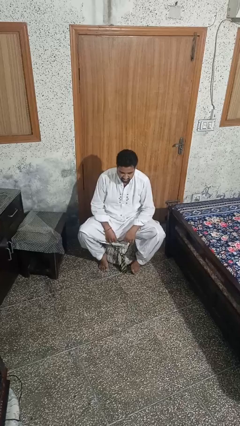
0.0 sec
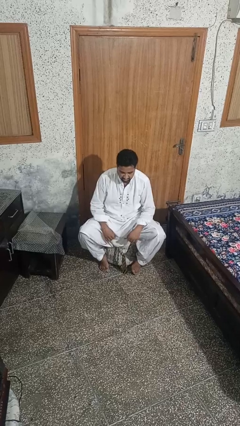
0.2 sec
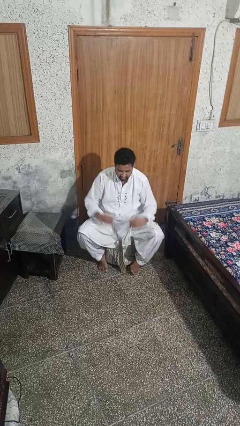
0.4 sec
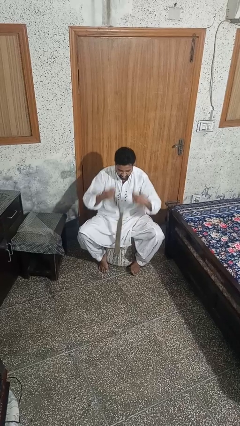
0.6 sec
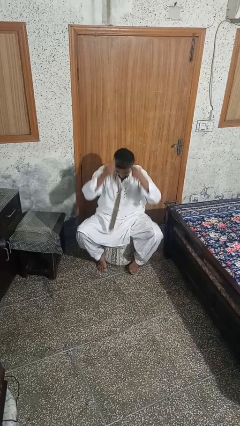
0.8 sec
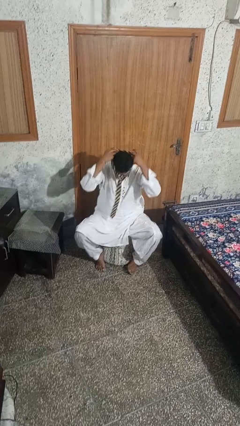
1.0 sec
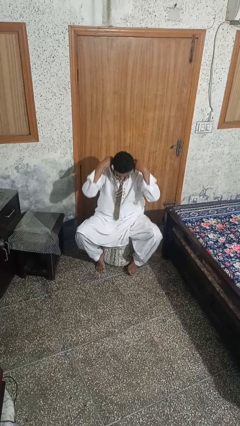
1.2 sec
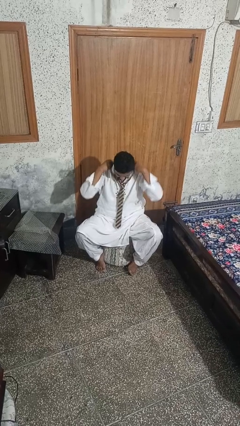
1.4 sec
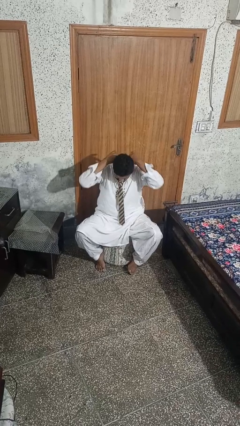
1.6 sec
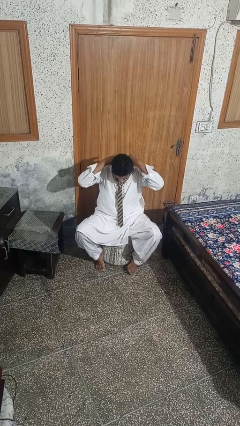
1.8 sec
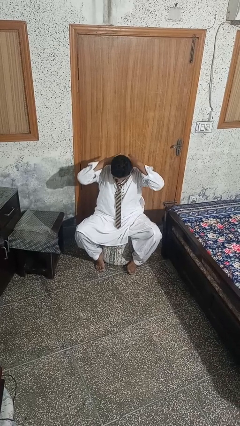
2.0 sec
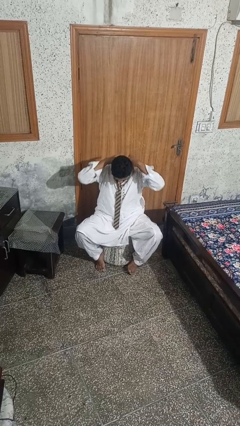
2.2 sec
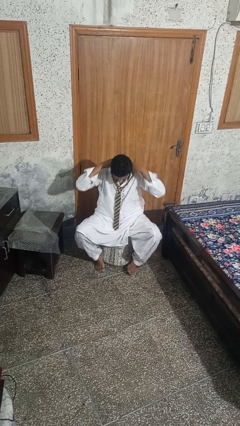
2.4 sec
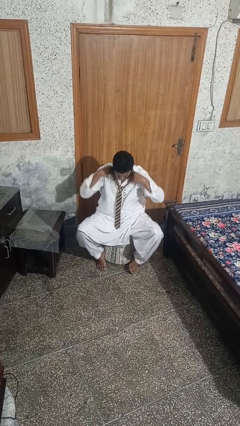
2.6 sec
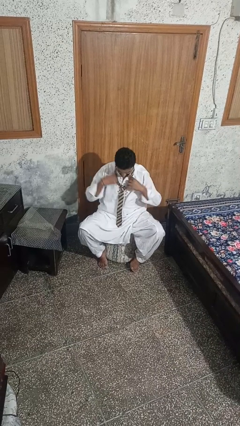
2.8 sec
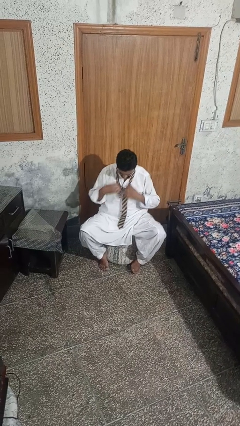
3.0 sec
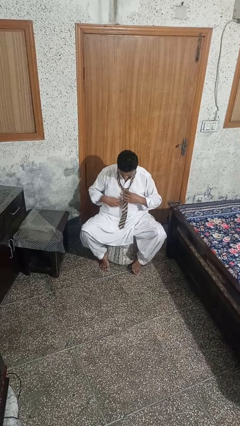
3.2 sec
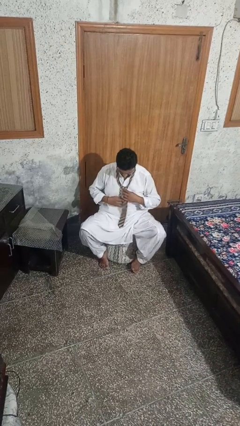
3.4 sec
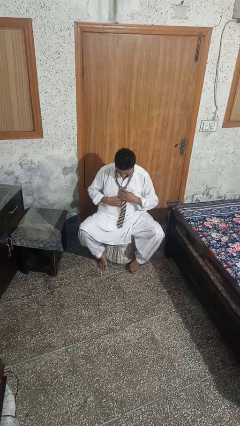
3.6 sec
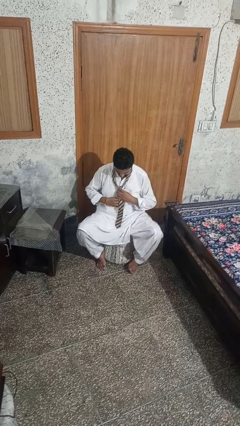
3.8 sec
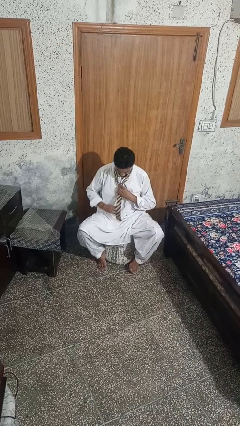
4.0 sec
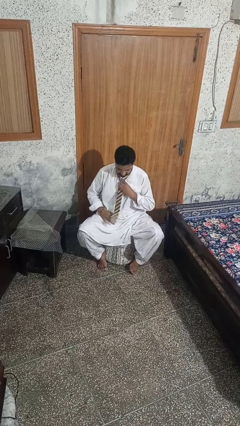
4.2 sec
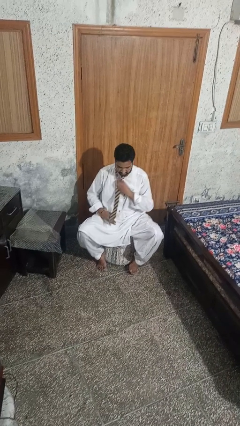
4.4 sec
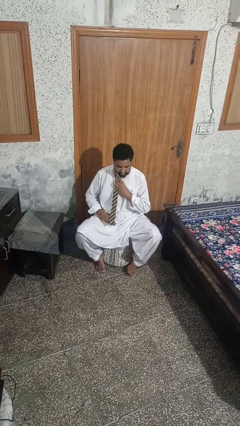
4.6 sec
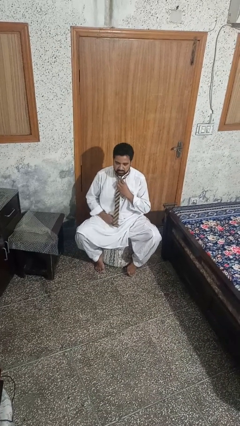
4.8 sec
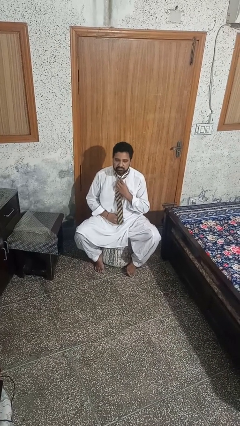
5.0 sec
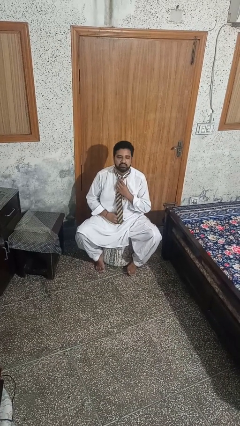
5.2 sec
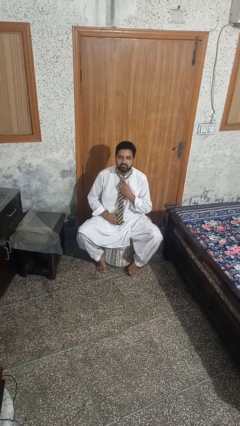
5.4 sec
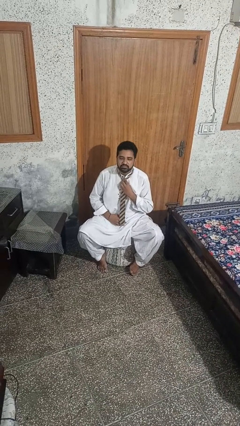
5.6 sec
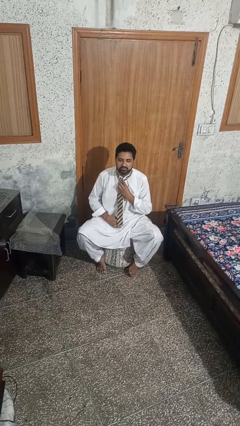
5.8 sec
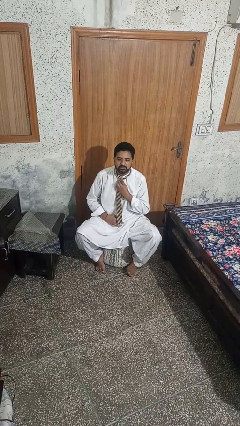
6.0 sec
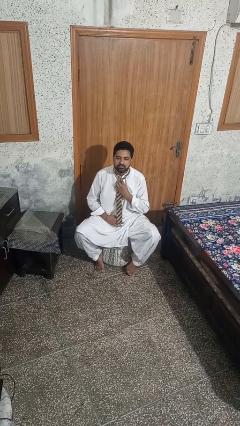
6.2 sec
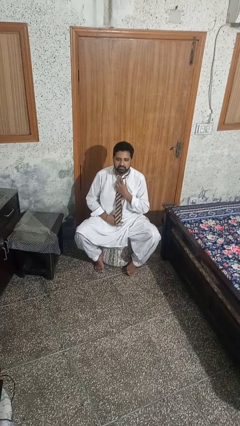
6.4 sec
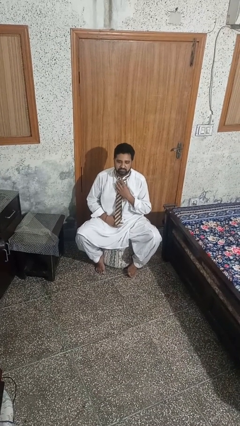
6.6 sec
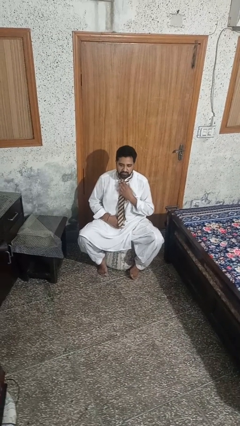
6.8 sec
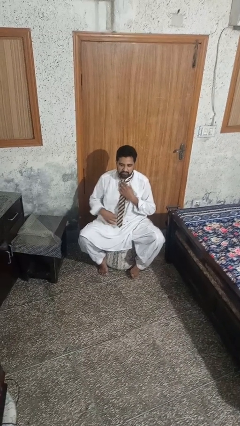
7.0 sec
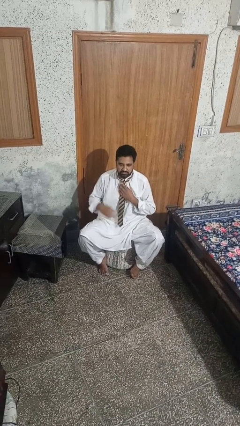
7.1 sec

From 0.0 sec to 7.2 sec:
person puts on necktie

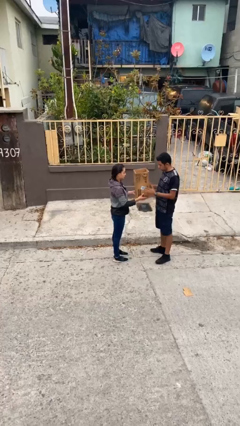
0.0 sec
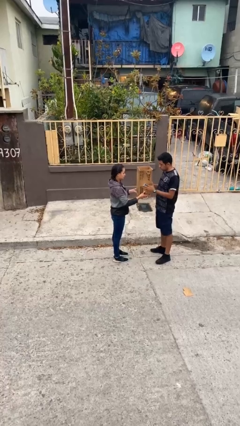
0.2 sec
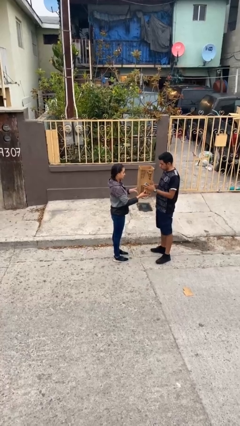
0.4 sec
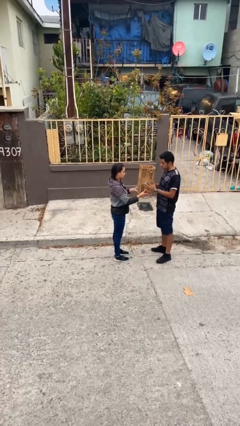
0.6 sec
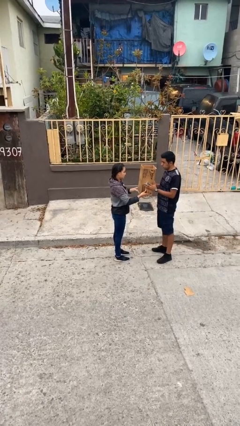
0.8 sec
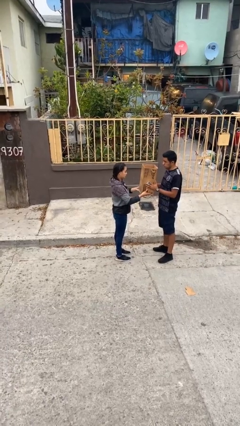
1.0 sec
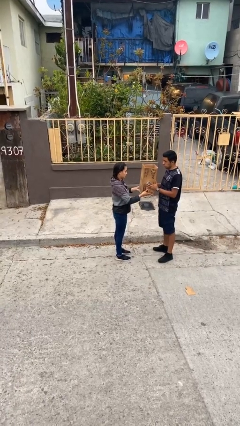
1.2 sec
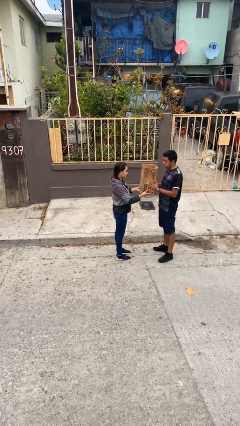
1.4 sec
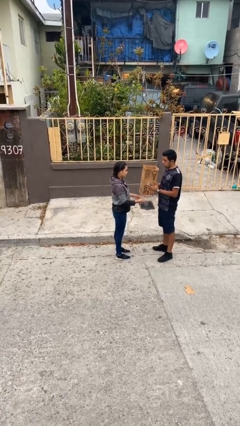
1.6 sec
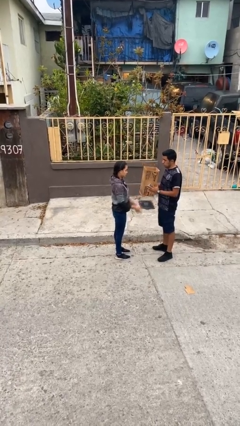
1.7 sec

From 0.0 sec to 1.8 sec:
person transfers object to person

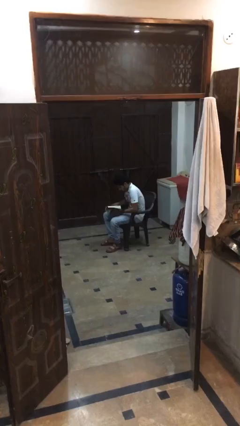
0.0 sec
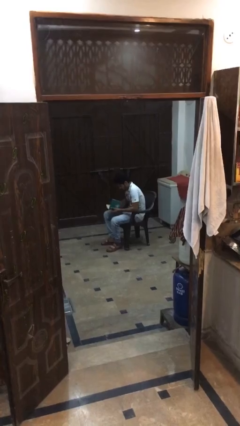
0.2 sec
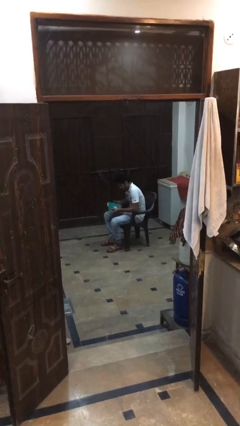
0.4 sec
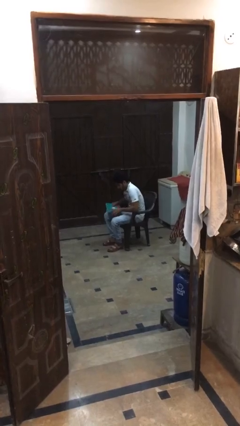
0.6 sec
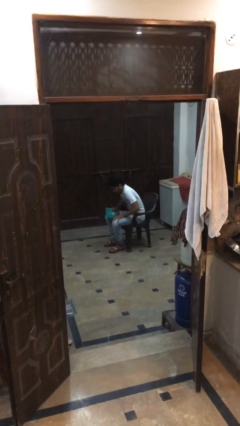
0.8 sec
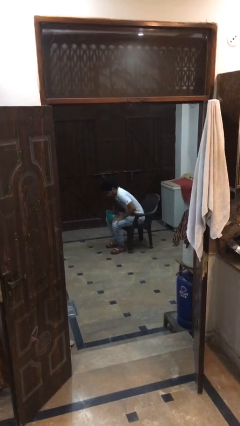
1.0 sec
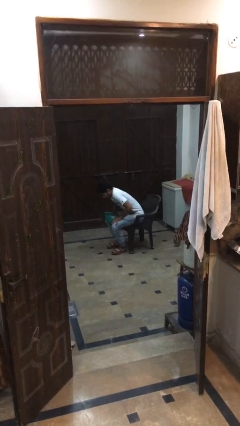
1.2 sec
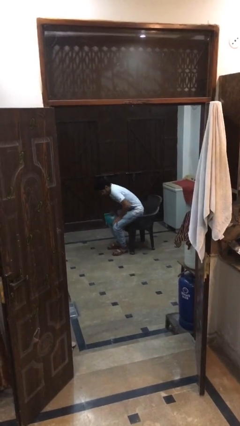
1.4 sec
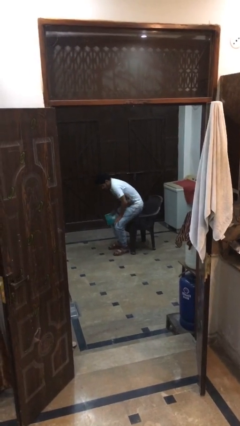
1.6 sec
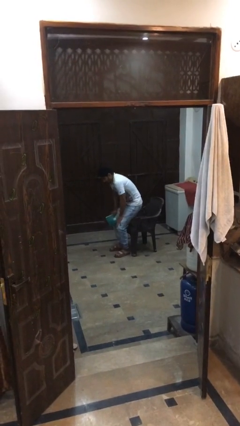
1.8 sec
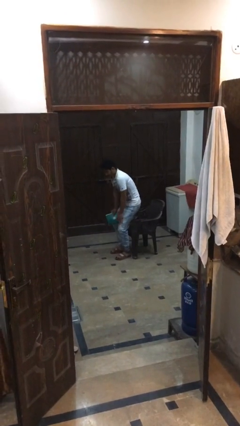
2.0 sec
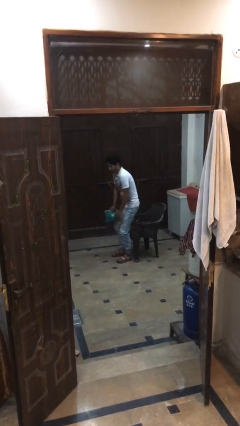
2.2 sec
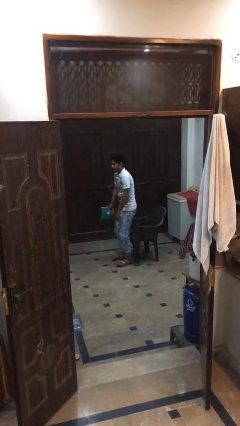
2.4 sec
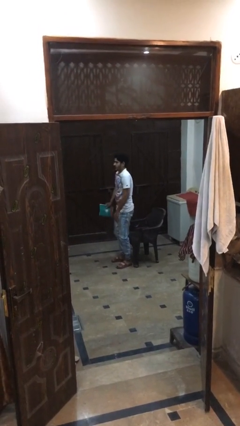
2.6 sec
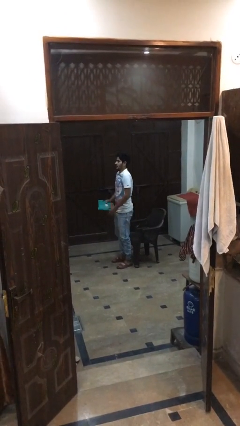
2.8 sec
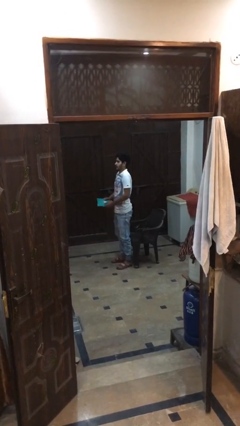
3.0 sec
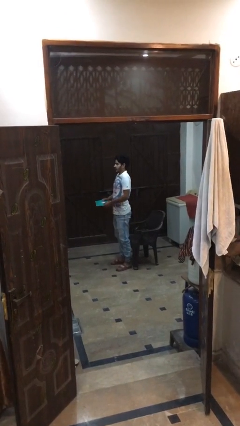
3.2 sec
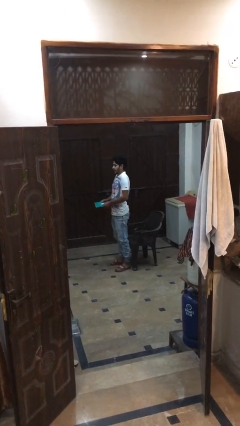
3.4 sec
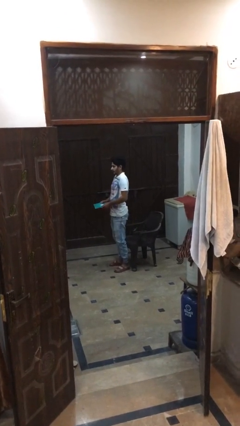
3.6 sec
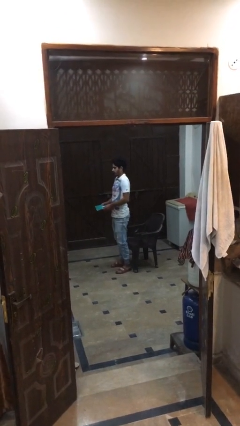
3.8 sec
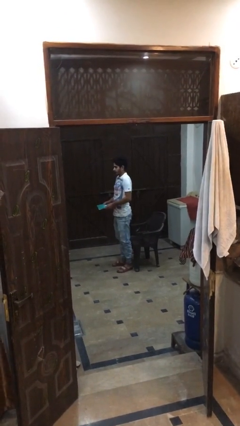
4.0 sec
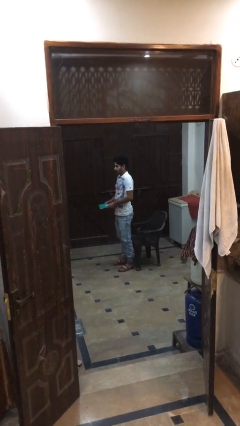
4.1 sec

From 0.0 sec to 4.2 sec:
person stands up

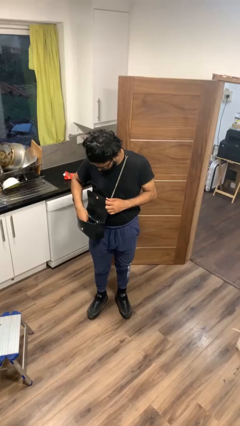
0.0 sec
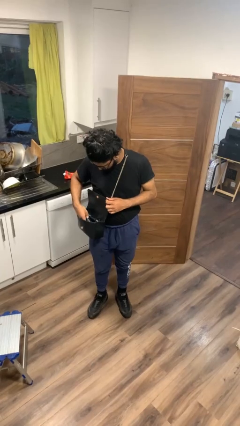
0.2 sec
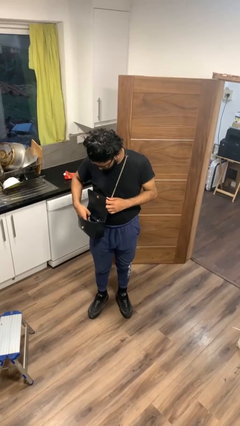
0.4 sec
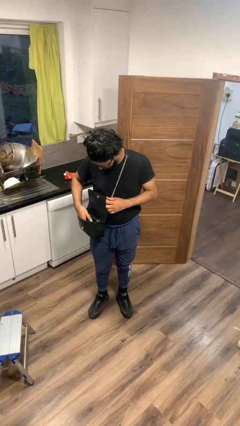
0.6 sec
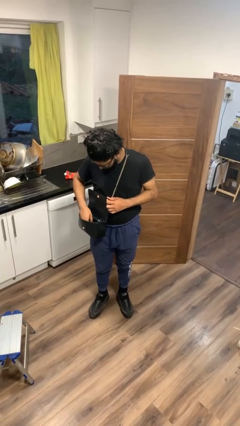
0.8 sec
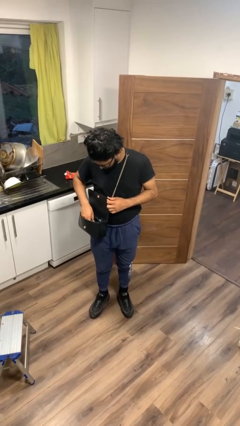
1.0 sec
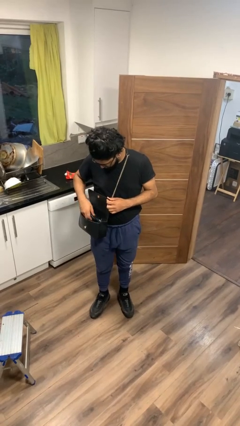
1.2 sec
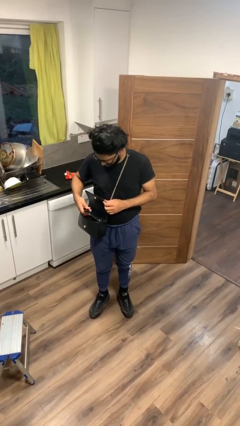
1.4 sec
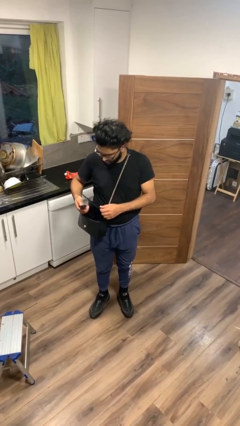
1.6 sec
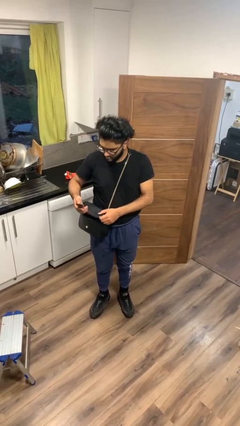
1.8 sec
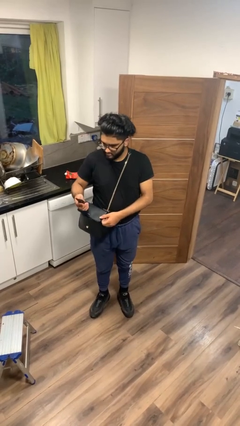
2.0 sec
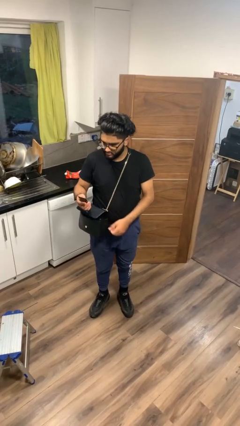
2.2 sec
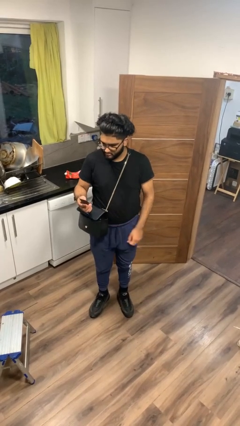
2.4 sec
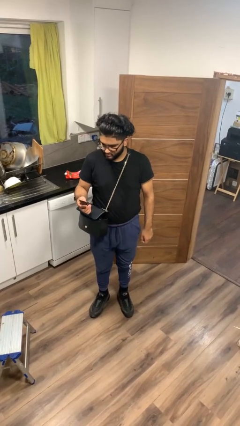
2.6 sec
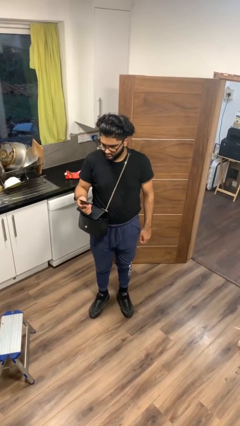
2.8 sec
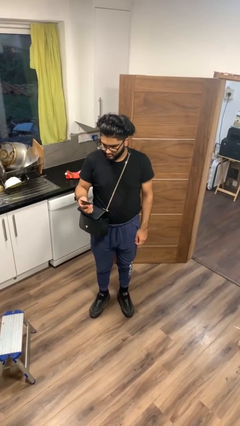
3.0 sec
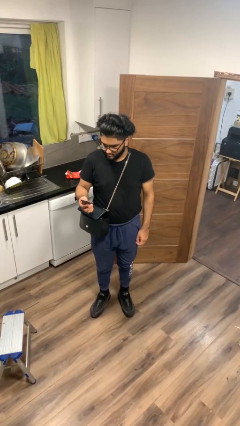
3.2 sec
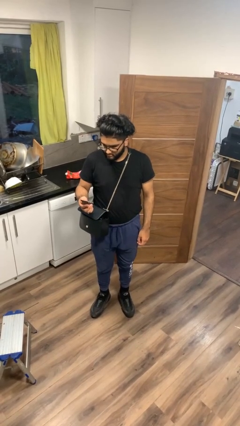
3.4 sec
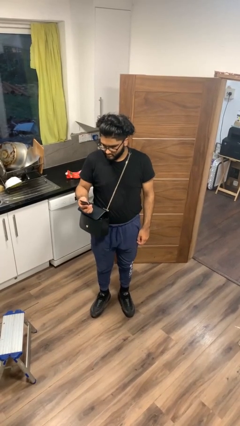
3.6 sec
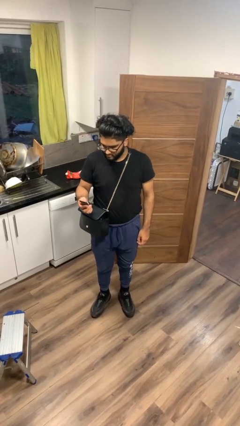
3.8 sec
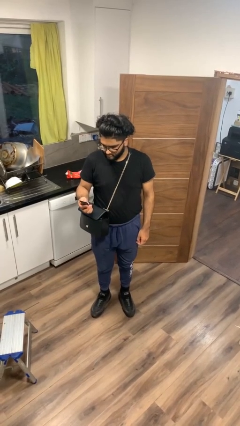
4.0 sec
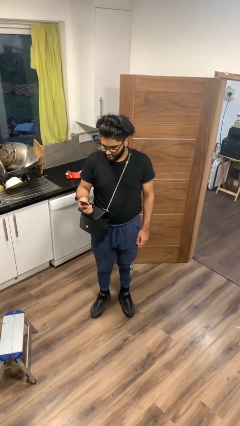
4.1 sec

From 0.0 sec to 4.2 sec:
person takes object from purse

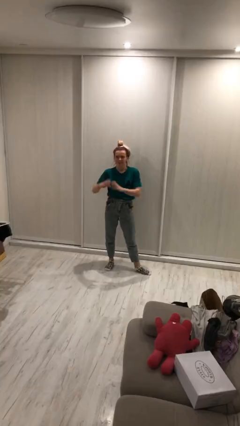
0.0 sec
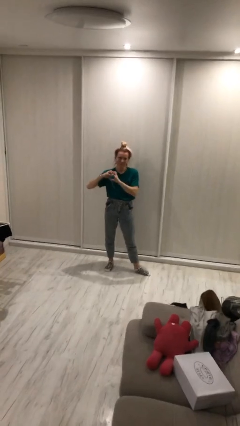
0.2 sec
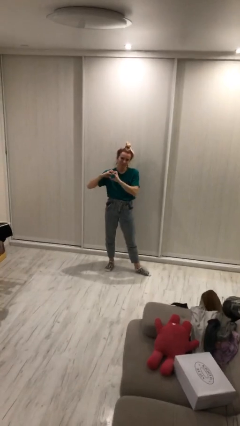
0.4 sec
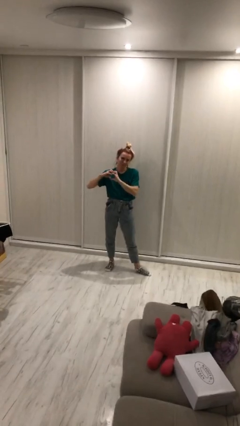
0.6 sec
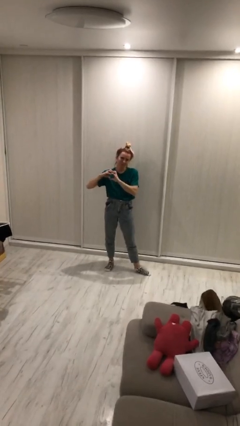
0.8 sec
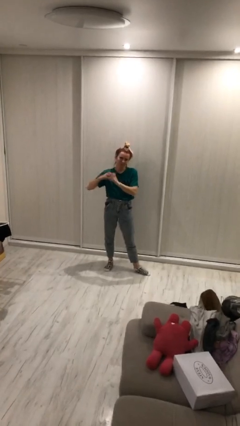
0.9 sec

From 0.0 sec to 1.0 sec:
person gestures heart
